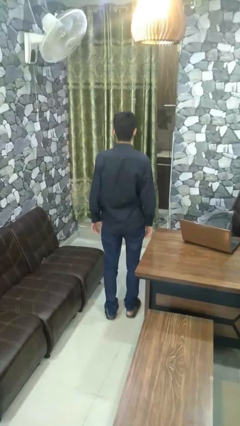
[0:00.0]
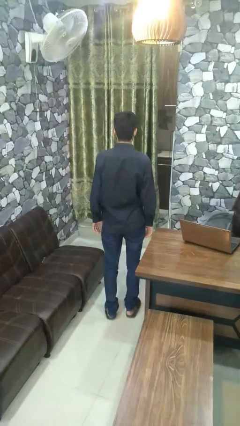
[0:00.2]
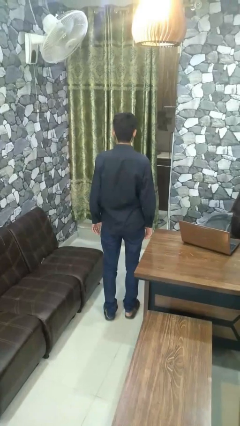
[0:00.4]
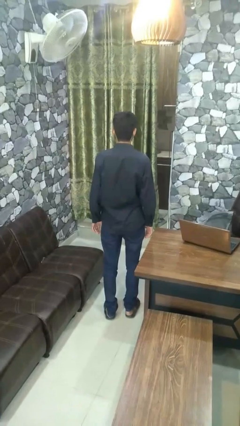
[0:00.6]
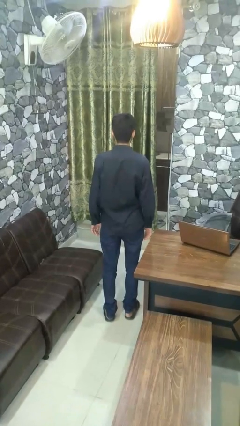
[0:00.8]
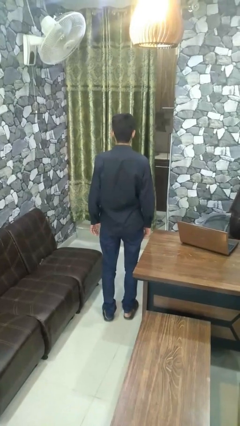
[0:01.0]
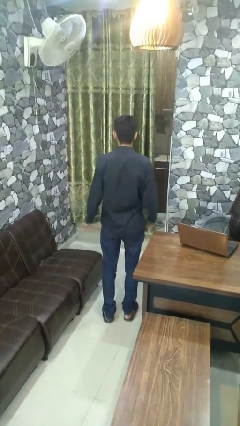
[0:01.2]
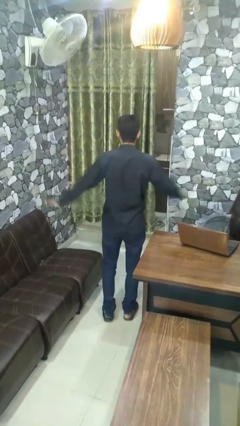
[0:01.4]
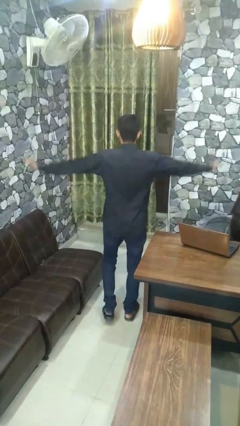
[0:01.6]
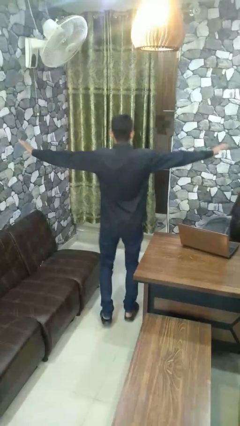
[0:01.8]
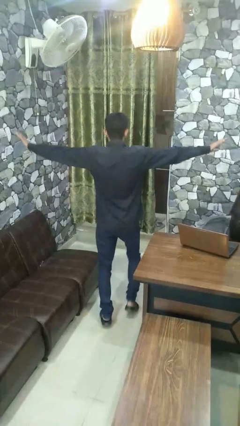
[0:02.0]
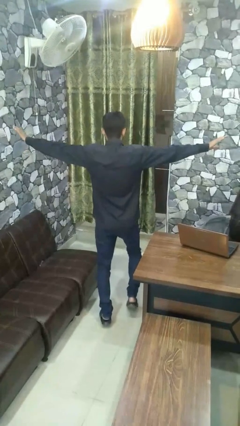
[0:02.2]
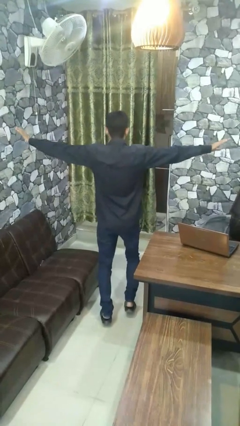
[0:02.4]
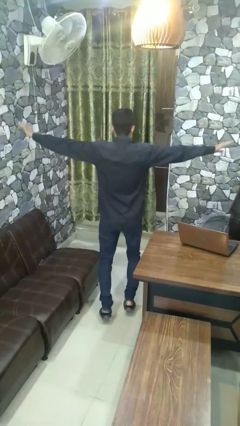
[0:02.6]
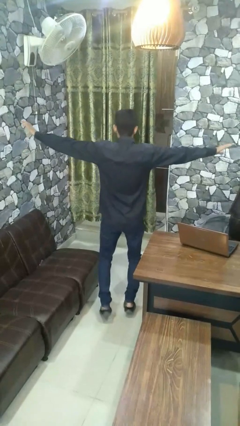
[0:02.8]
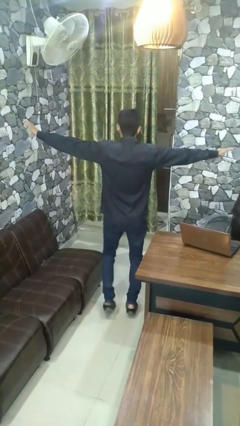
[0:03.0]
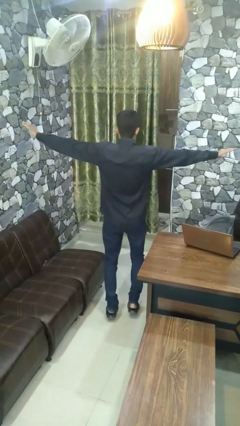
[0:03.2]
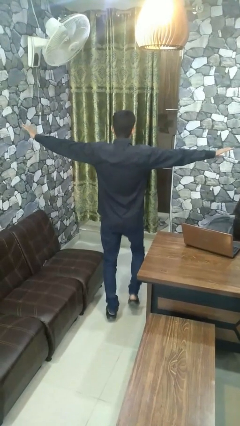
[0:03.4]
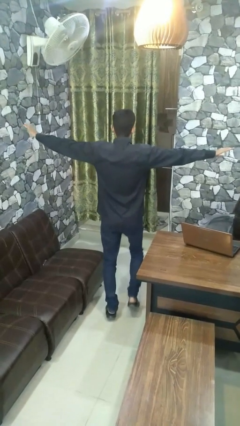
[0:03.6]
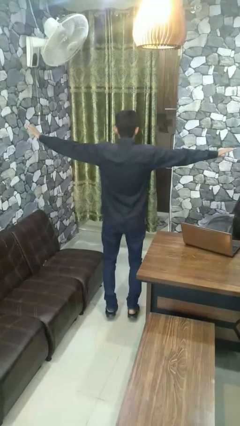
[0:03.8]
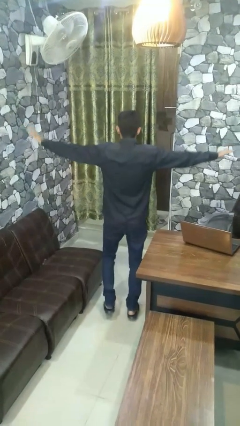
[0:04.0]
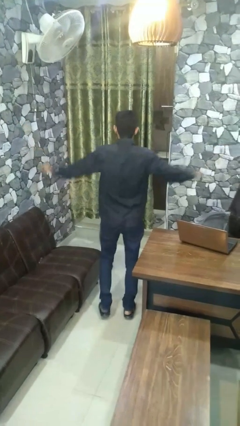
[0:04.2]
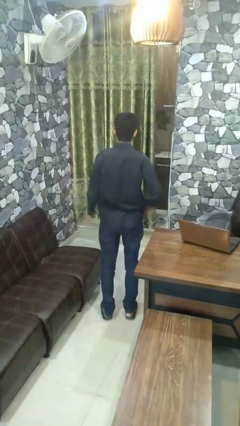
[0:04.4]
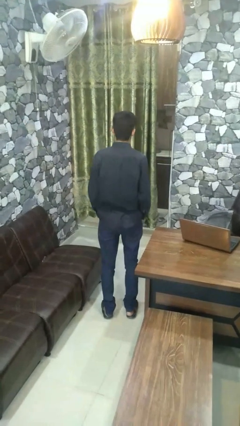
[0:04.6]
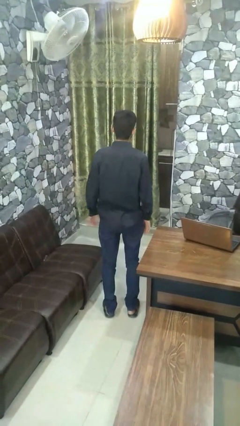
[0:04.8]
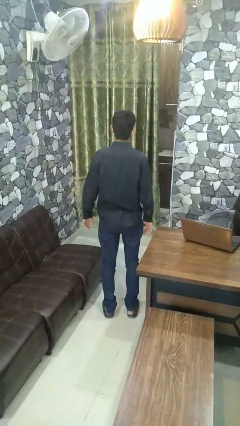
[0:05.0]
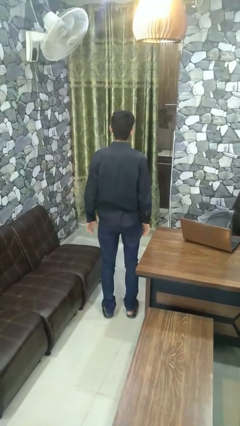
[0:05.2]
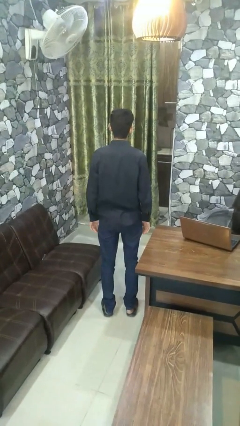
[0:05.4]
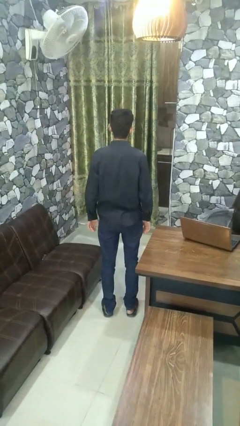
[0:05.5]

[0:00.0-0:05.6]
person walks tiptoe

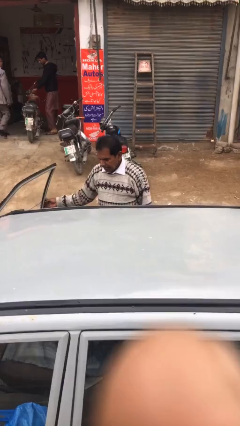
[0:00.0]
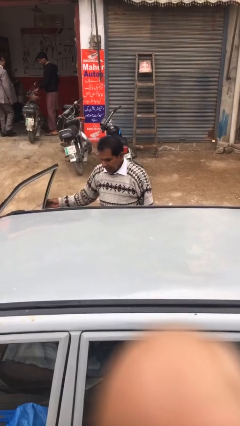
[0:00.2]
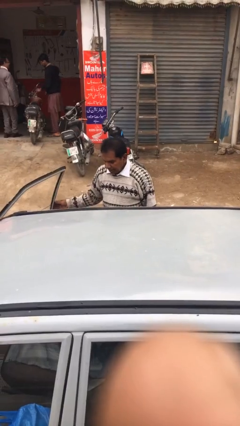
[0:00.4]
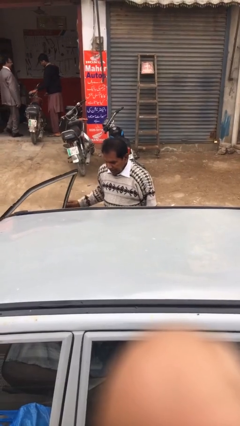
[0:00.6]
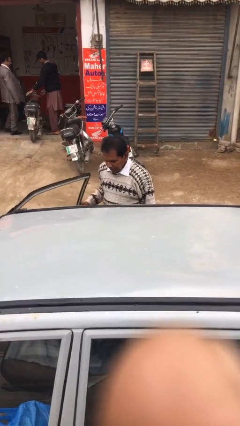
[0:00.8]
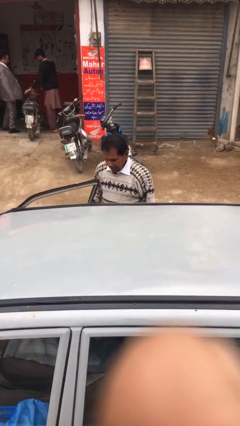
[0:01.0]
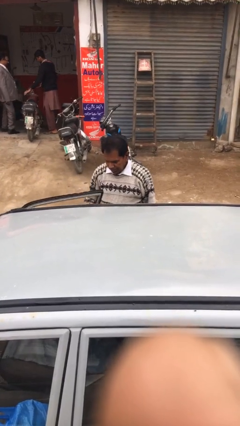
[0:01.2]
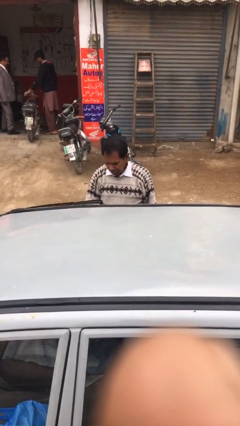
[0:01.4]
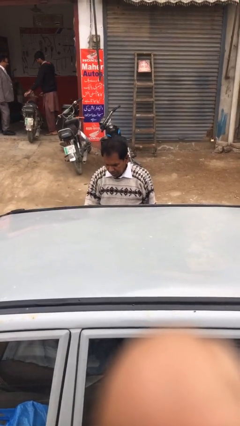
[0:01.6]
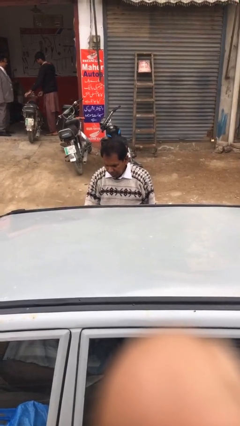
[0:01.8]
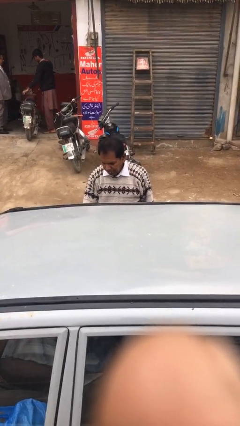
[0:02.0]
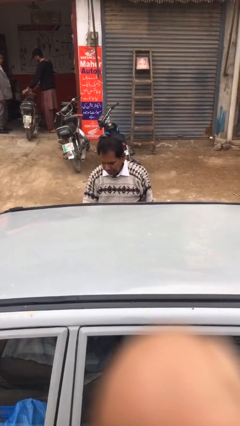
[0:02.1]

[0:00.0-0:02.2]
person closes car door

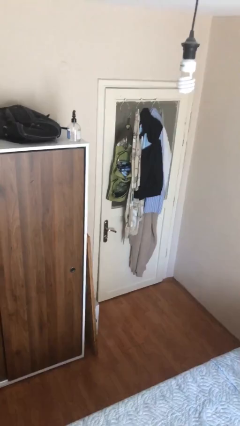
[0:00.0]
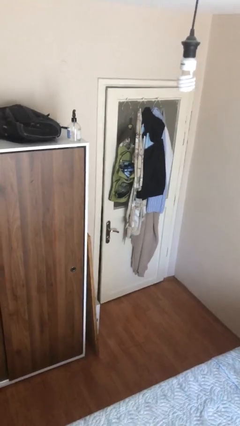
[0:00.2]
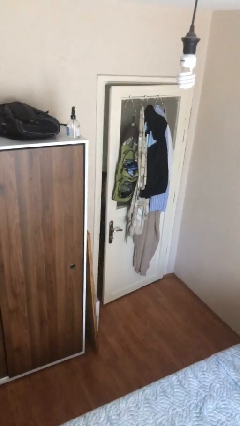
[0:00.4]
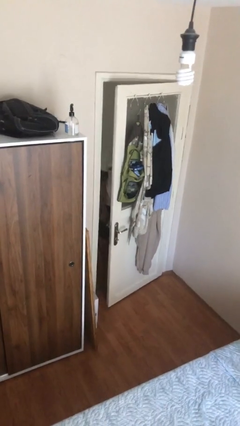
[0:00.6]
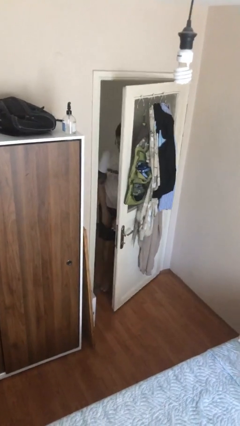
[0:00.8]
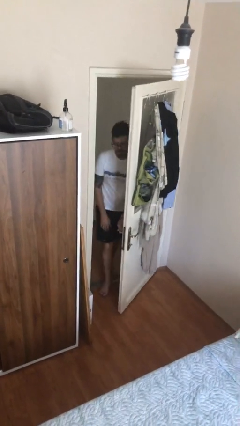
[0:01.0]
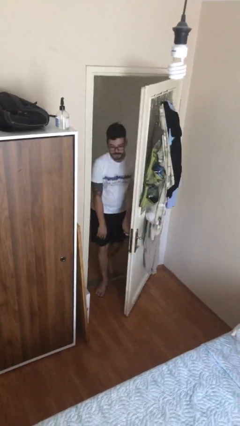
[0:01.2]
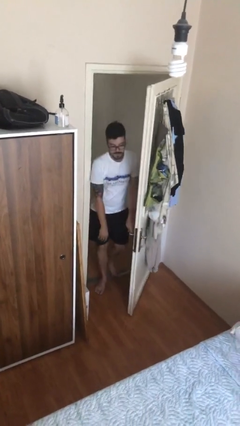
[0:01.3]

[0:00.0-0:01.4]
person opens facility door

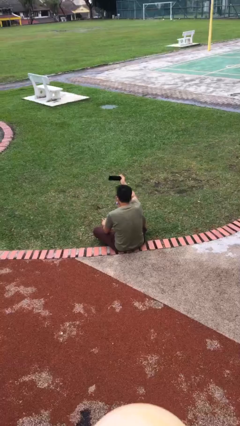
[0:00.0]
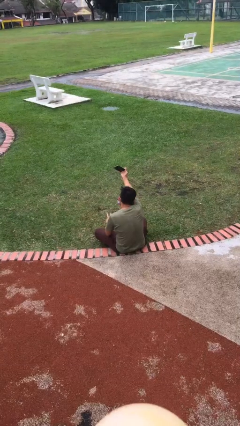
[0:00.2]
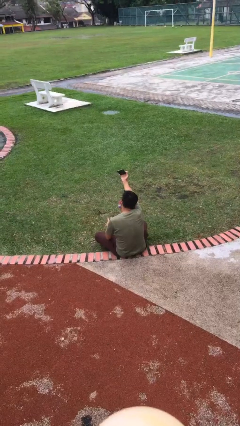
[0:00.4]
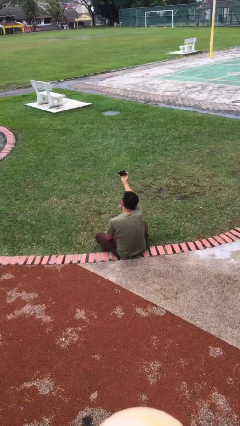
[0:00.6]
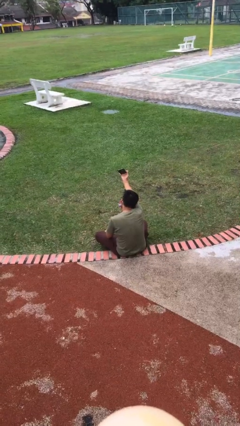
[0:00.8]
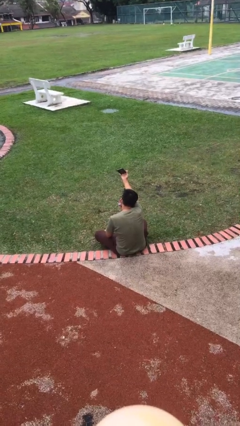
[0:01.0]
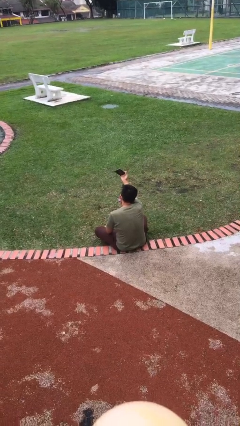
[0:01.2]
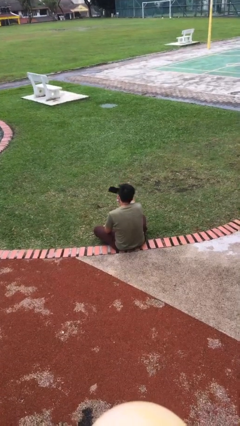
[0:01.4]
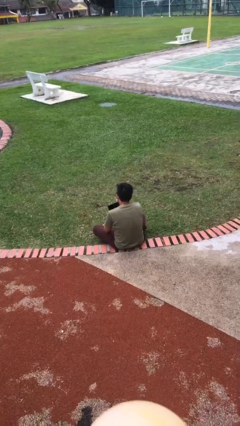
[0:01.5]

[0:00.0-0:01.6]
person takes selfie

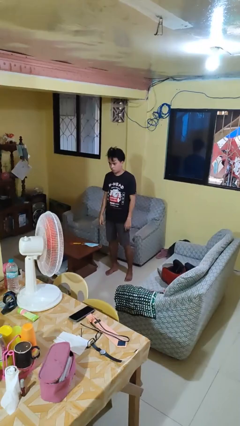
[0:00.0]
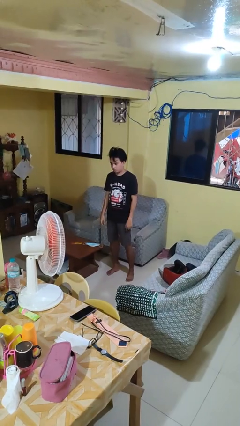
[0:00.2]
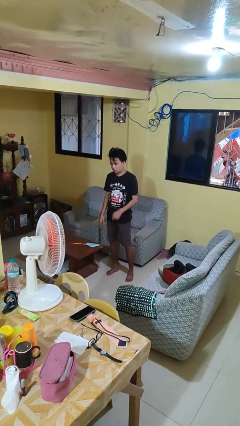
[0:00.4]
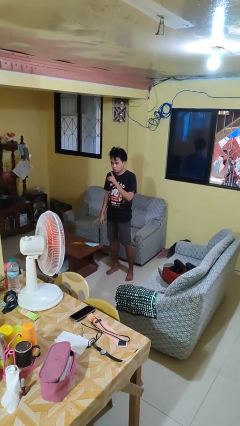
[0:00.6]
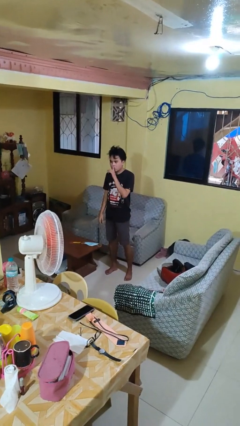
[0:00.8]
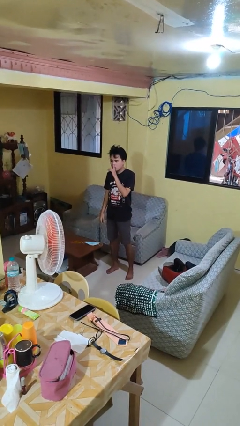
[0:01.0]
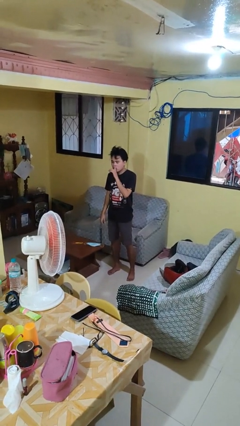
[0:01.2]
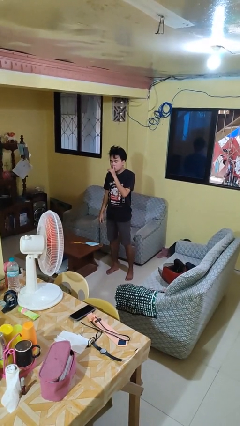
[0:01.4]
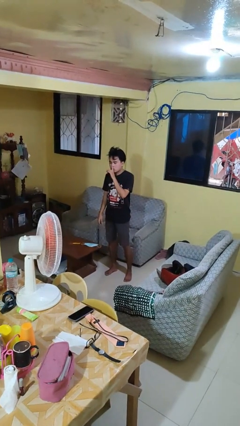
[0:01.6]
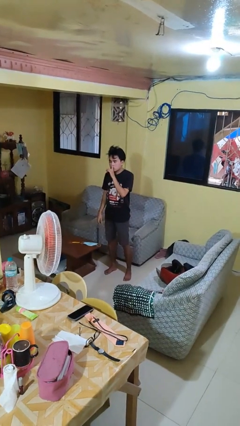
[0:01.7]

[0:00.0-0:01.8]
person gestures be quiet

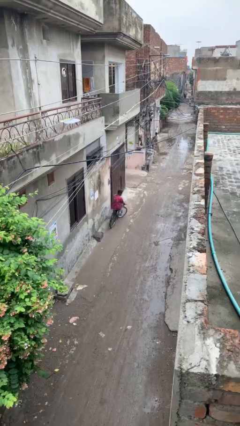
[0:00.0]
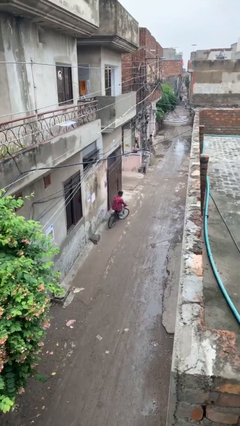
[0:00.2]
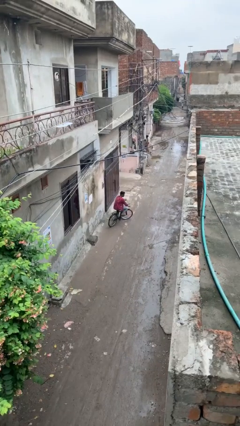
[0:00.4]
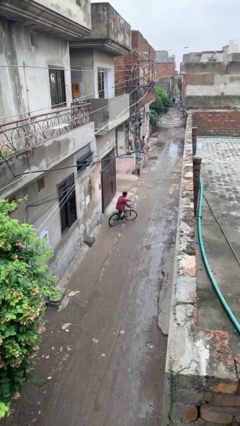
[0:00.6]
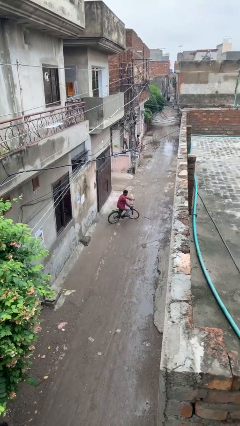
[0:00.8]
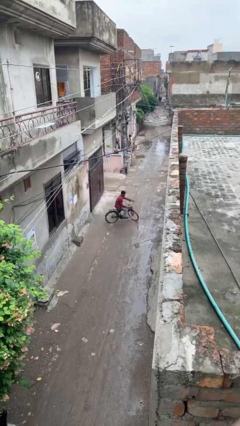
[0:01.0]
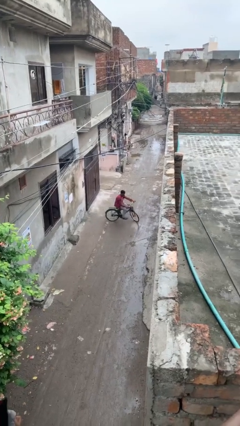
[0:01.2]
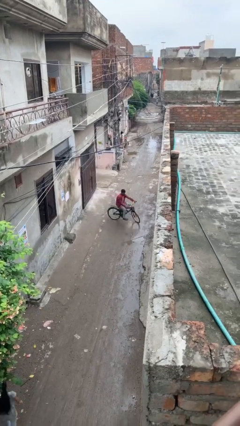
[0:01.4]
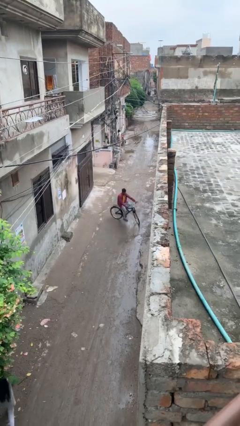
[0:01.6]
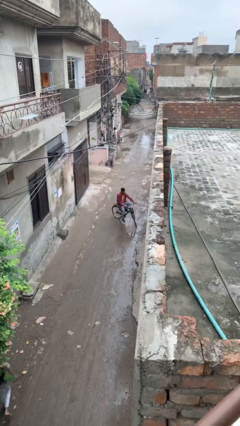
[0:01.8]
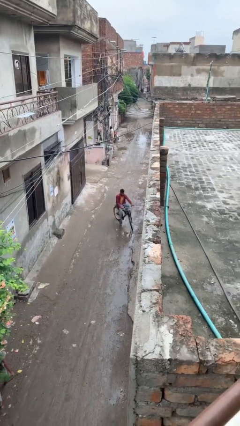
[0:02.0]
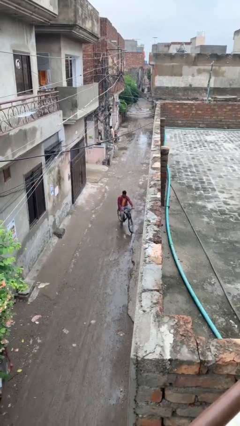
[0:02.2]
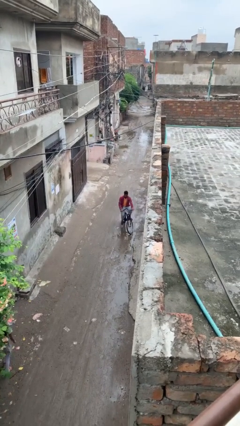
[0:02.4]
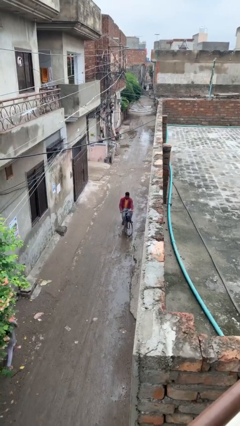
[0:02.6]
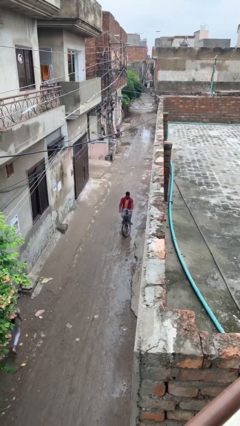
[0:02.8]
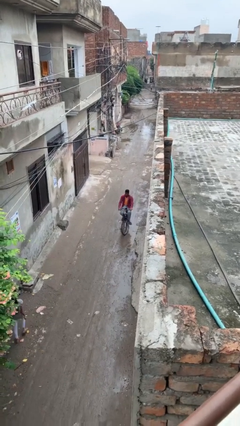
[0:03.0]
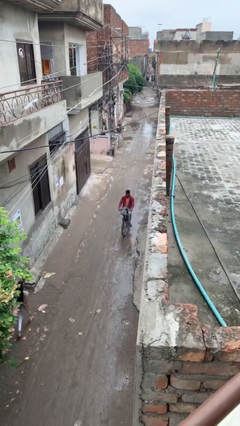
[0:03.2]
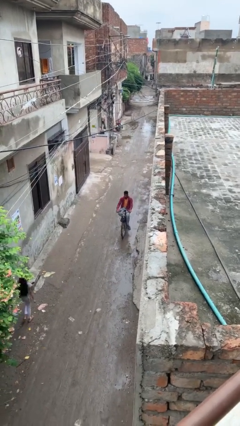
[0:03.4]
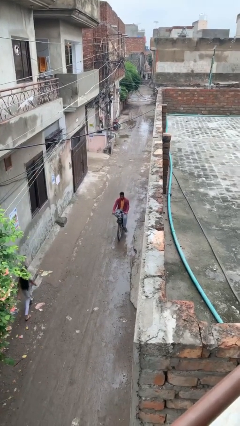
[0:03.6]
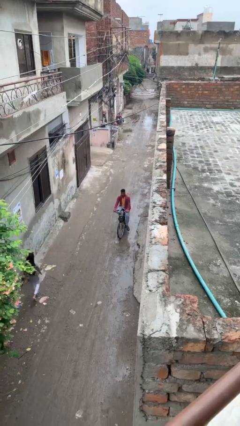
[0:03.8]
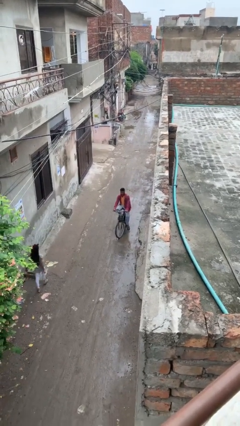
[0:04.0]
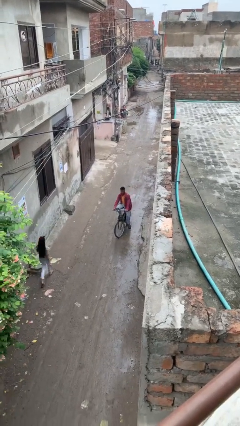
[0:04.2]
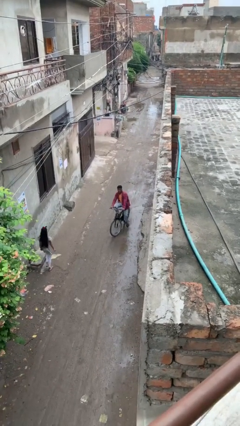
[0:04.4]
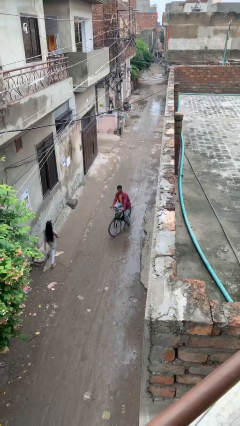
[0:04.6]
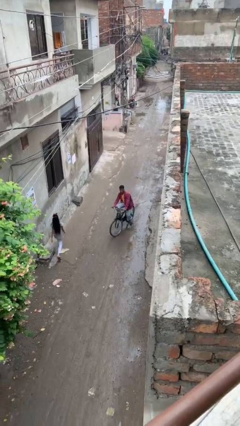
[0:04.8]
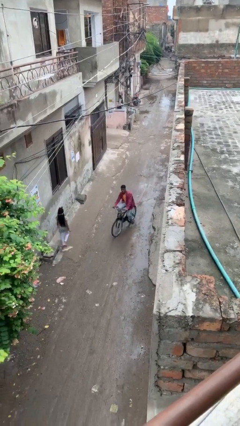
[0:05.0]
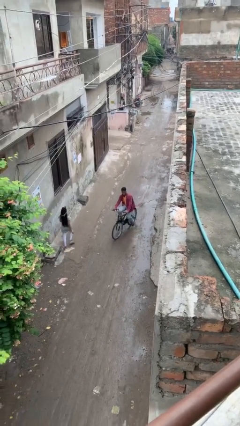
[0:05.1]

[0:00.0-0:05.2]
person rides bicycle
